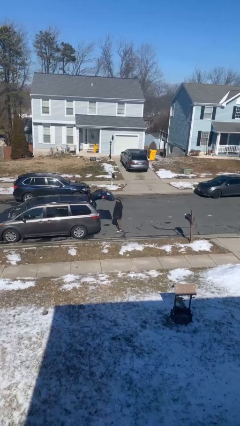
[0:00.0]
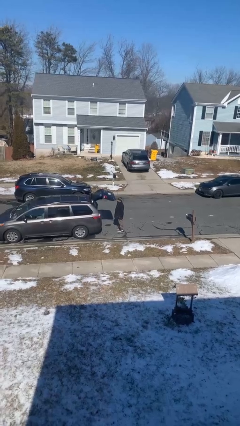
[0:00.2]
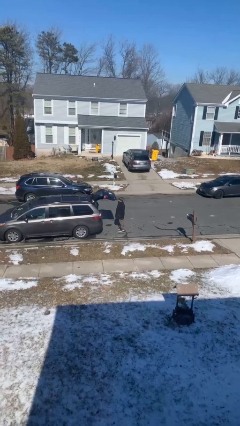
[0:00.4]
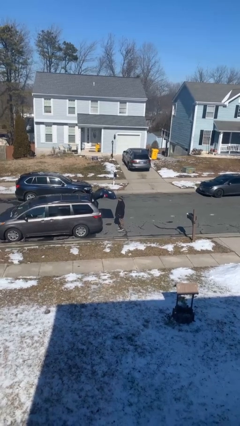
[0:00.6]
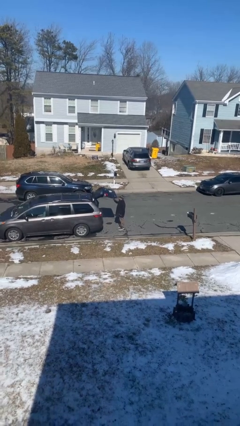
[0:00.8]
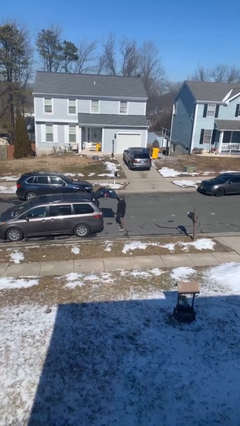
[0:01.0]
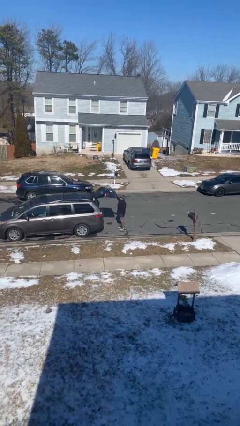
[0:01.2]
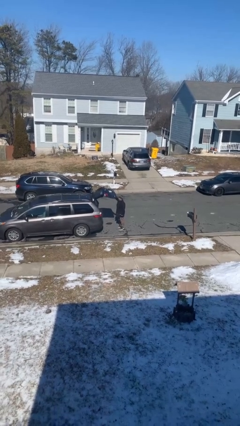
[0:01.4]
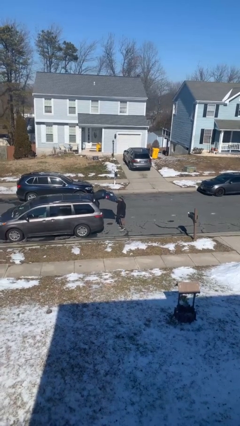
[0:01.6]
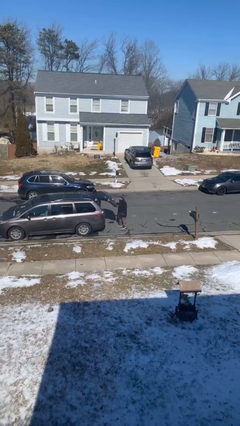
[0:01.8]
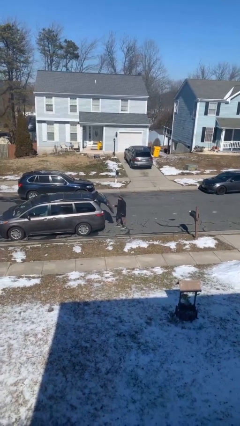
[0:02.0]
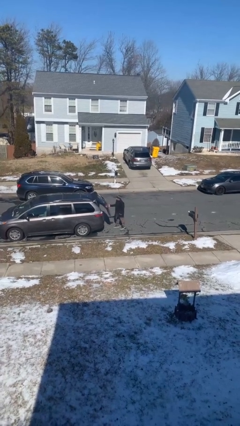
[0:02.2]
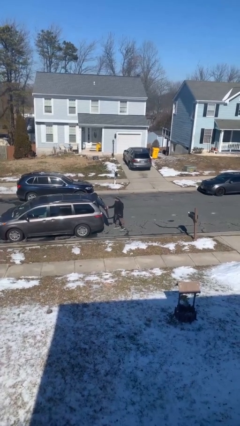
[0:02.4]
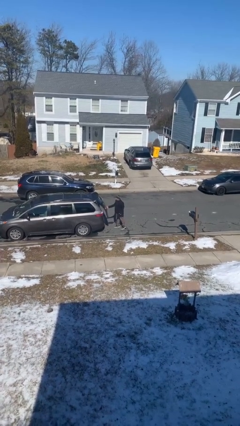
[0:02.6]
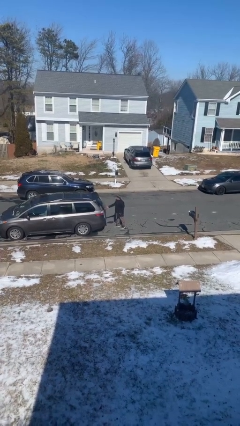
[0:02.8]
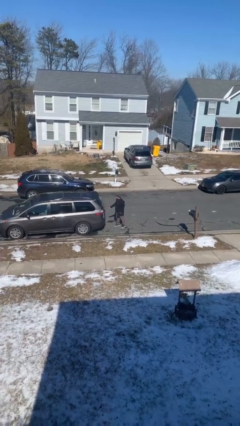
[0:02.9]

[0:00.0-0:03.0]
person closes car trunk

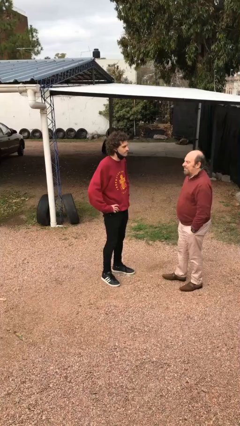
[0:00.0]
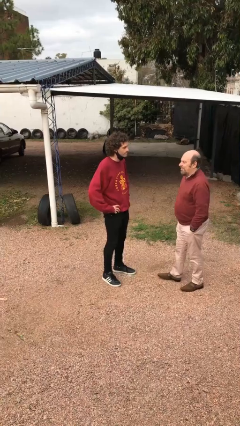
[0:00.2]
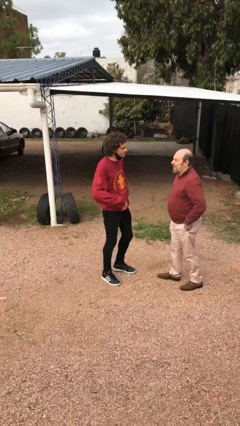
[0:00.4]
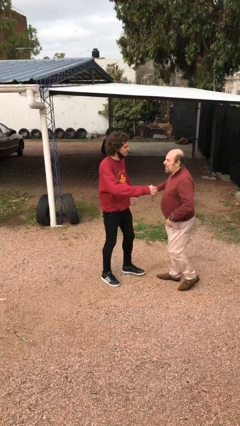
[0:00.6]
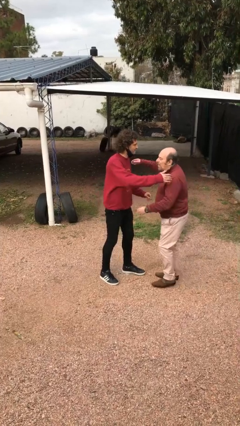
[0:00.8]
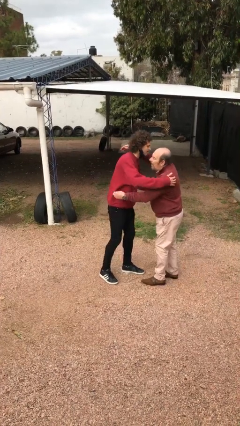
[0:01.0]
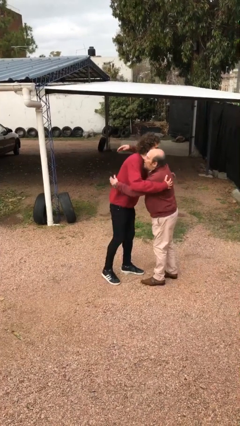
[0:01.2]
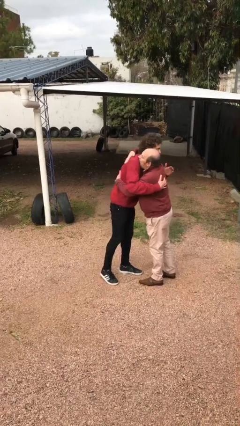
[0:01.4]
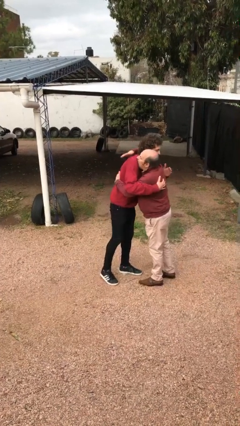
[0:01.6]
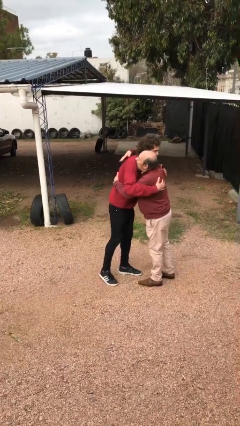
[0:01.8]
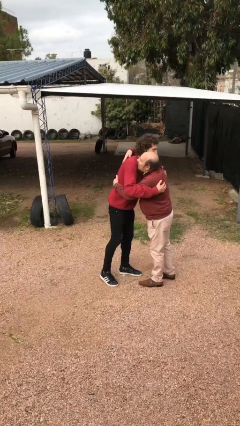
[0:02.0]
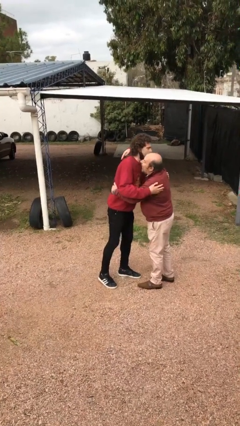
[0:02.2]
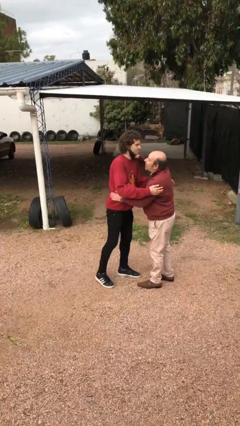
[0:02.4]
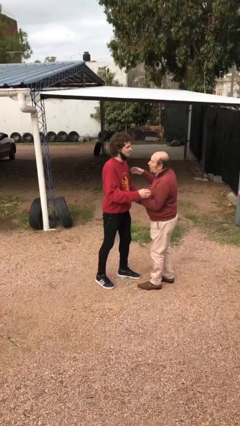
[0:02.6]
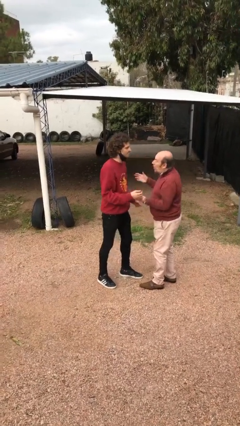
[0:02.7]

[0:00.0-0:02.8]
person embraces person

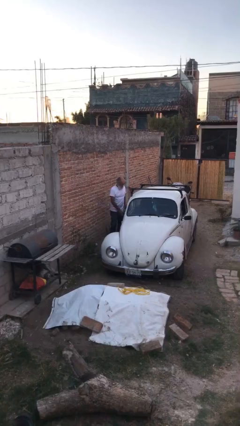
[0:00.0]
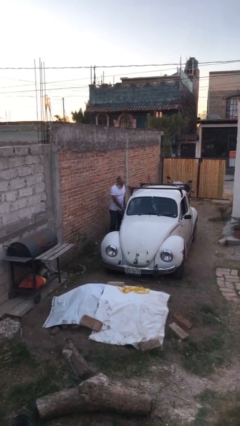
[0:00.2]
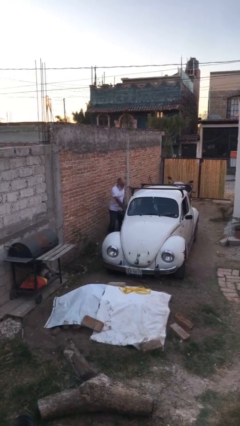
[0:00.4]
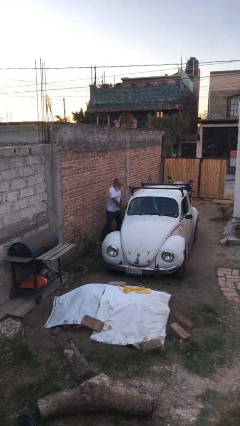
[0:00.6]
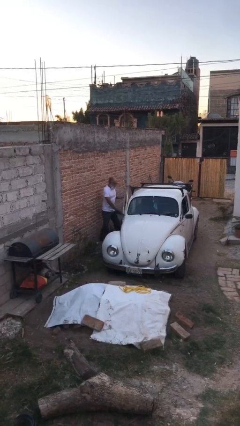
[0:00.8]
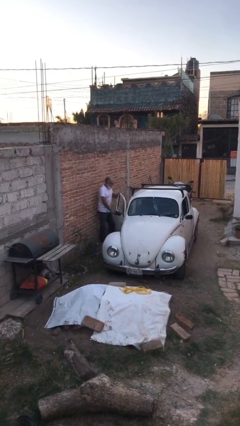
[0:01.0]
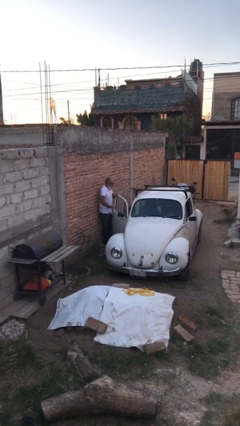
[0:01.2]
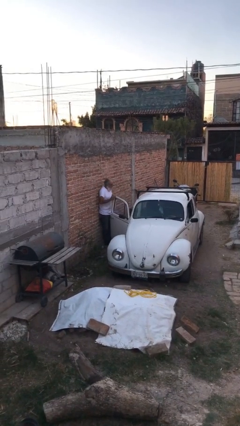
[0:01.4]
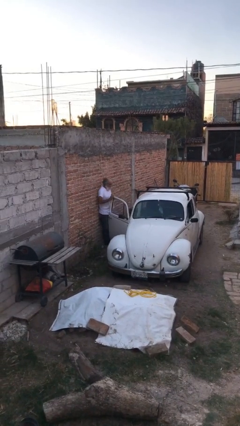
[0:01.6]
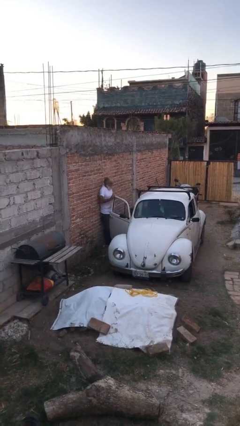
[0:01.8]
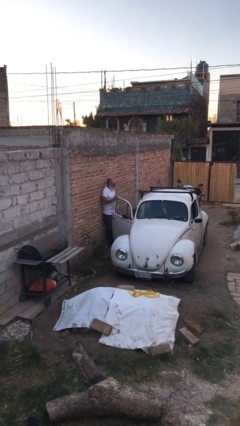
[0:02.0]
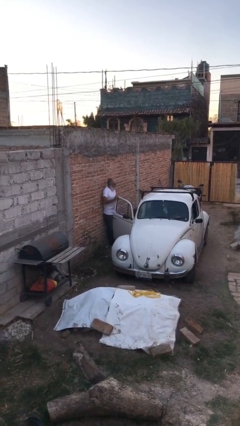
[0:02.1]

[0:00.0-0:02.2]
person opens car door

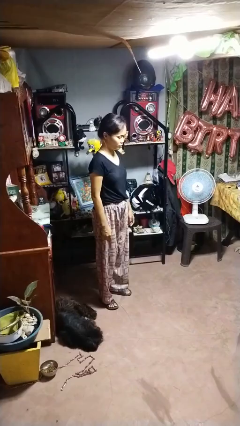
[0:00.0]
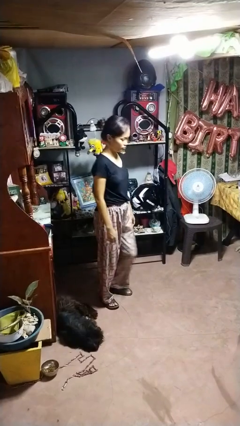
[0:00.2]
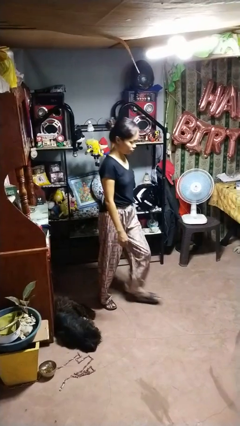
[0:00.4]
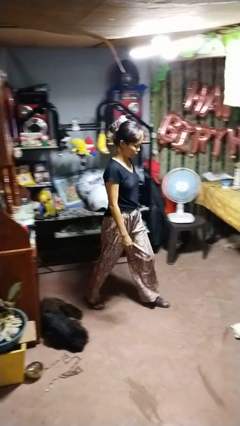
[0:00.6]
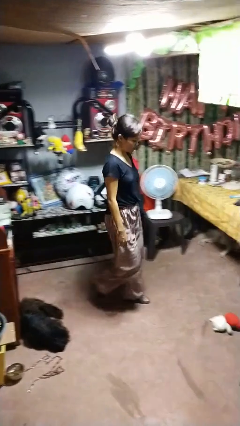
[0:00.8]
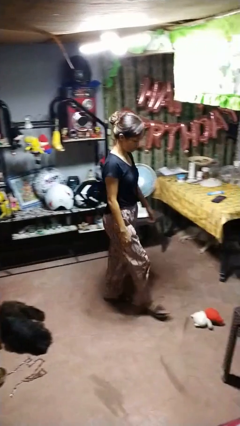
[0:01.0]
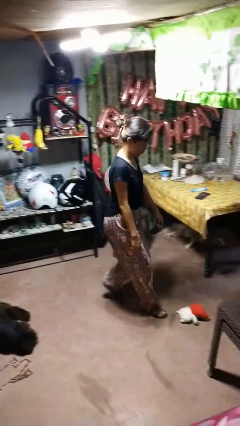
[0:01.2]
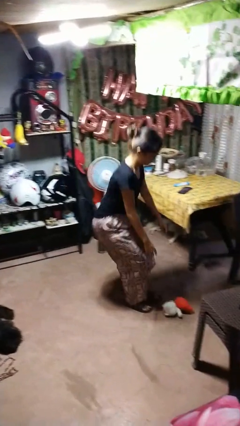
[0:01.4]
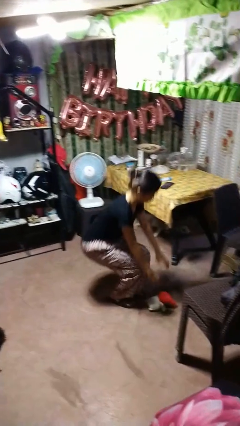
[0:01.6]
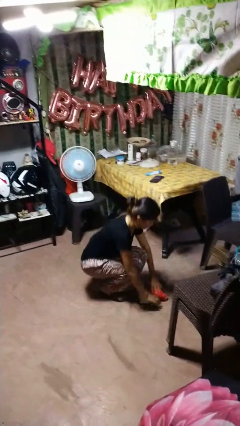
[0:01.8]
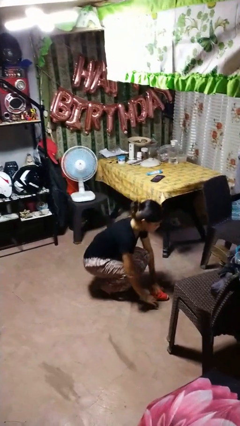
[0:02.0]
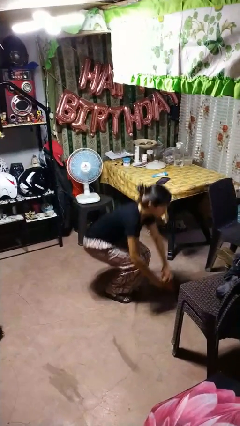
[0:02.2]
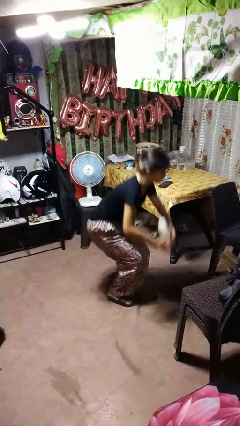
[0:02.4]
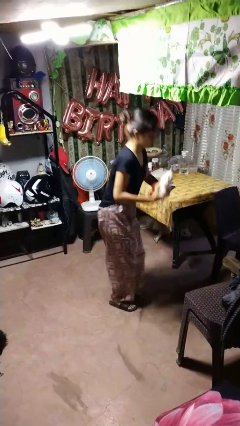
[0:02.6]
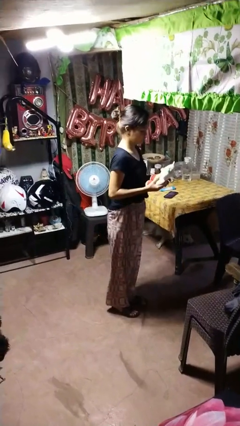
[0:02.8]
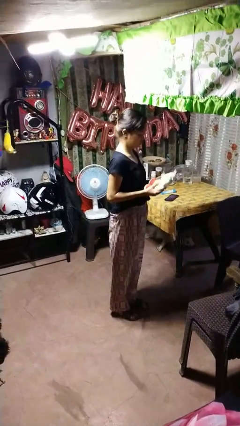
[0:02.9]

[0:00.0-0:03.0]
person picks up object from floor

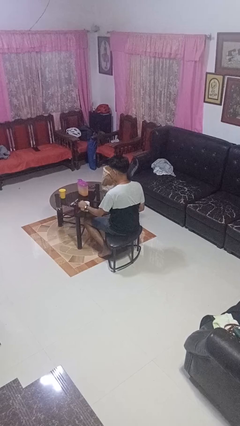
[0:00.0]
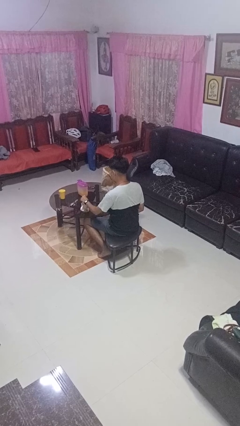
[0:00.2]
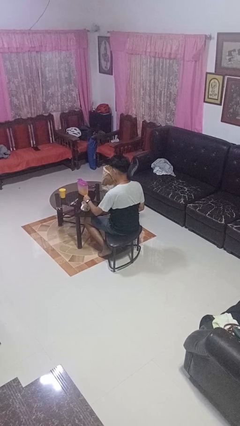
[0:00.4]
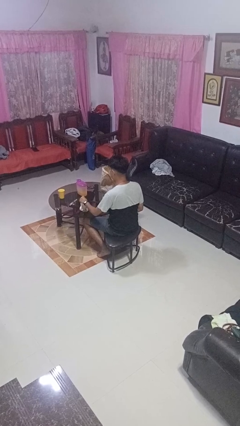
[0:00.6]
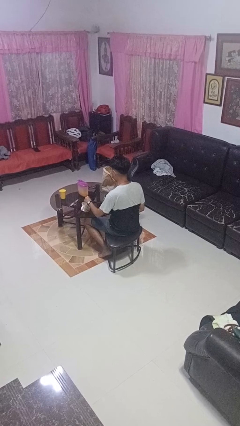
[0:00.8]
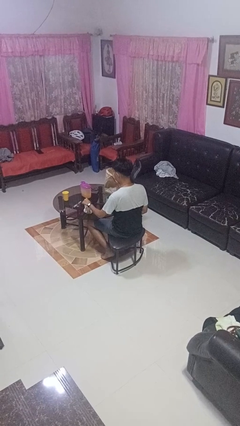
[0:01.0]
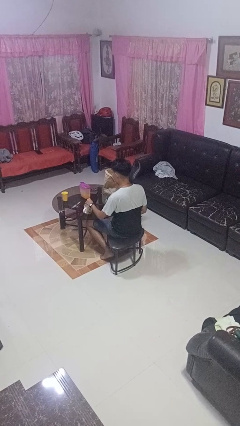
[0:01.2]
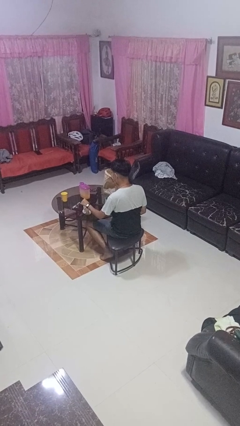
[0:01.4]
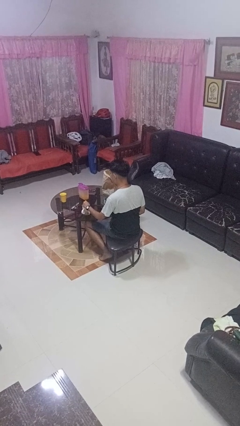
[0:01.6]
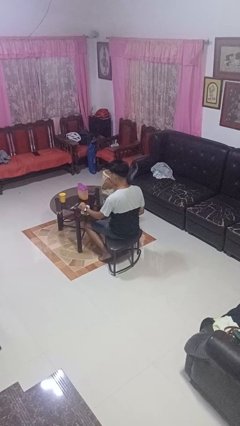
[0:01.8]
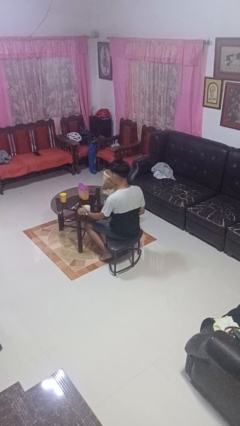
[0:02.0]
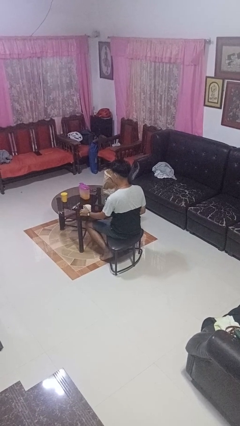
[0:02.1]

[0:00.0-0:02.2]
person stirs mug

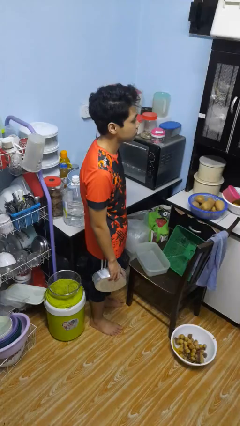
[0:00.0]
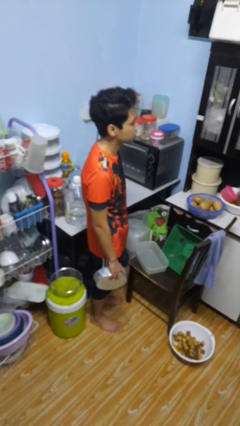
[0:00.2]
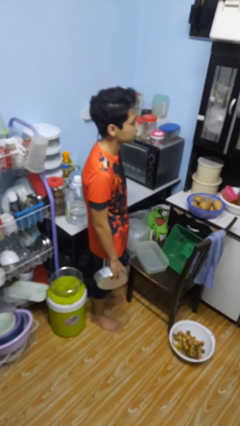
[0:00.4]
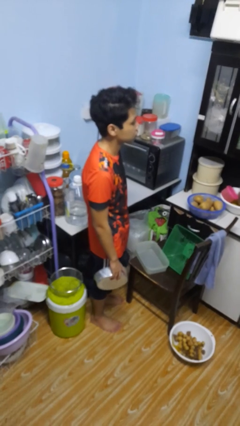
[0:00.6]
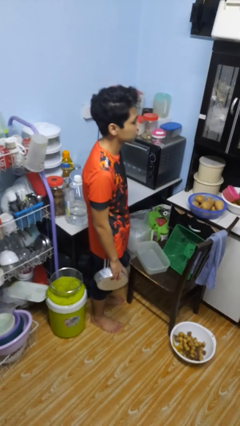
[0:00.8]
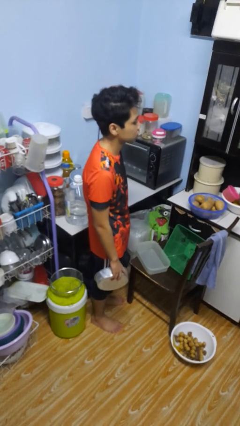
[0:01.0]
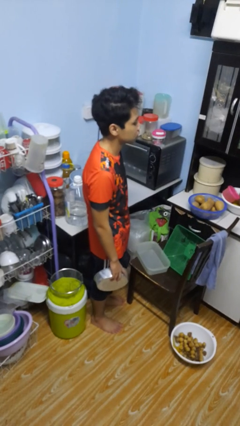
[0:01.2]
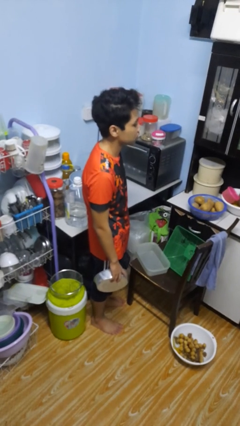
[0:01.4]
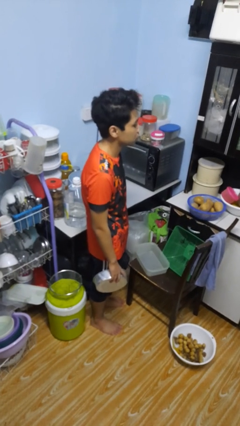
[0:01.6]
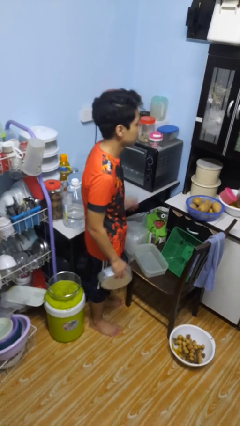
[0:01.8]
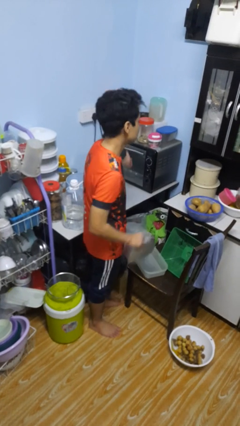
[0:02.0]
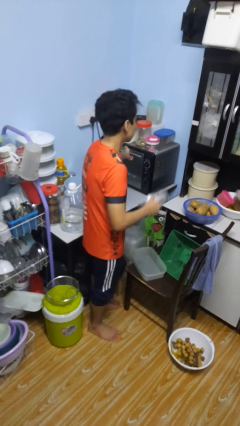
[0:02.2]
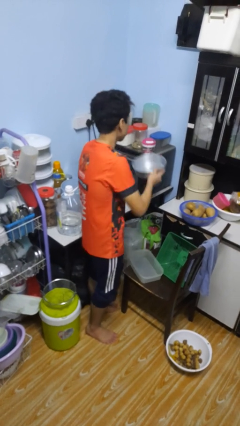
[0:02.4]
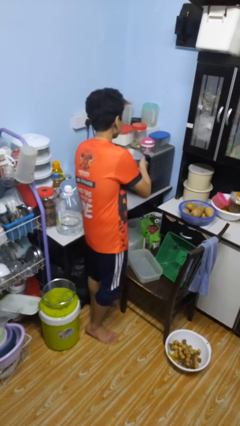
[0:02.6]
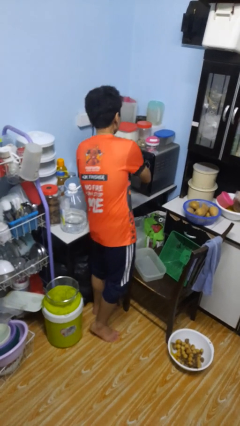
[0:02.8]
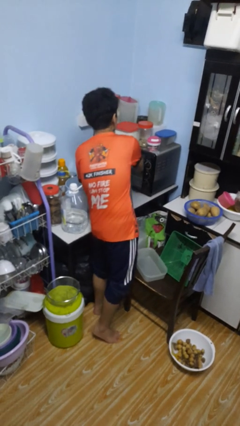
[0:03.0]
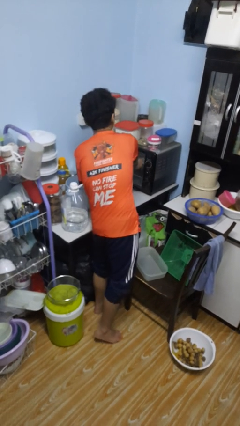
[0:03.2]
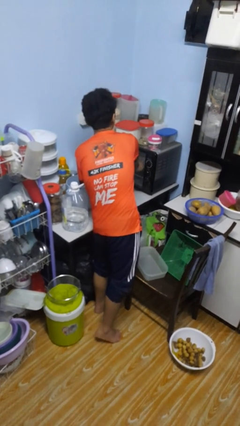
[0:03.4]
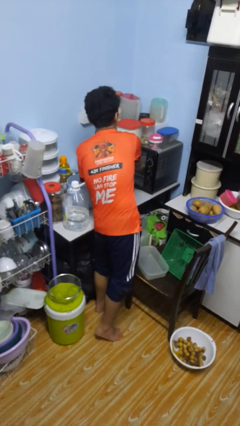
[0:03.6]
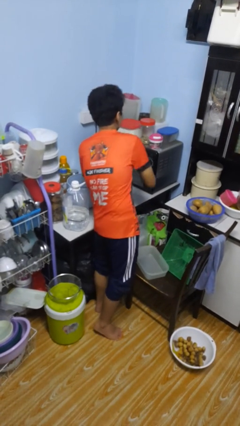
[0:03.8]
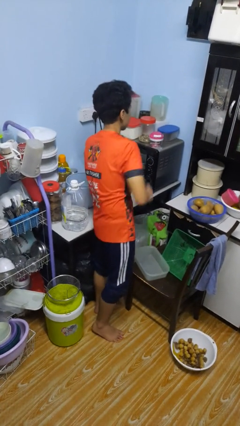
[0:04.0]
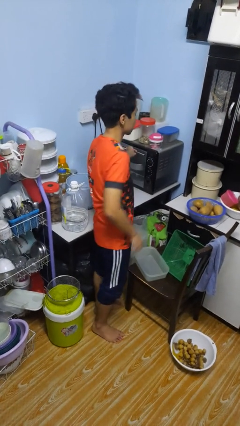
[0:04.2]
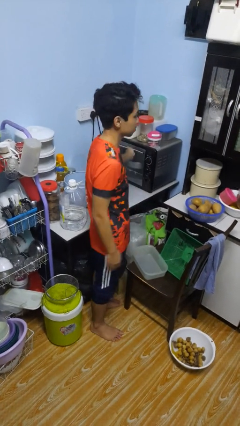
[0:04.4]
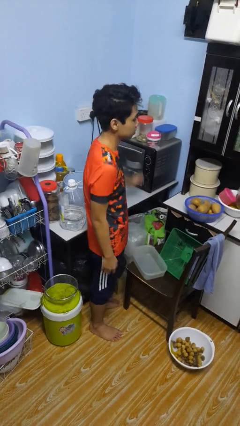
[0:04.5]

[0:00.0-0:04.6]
person puts object into oven
